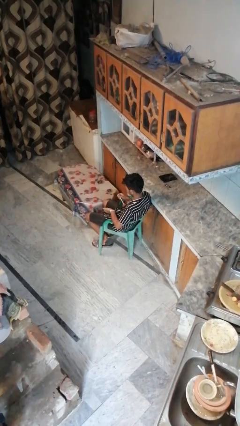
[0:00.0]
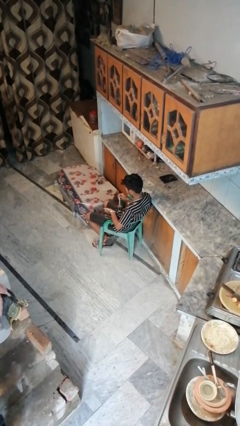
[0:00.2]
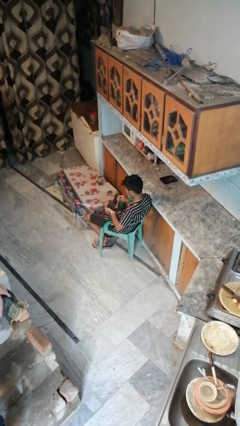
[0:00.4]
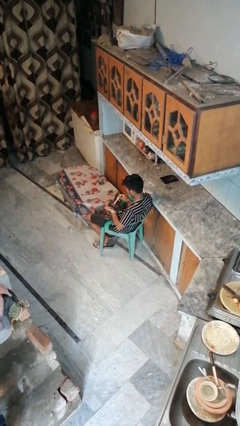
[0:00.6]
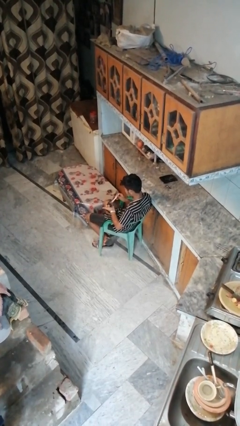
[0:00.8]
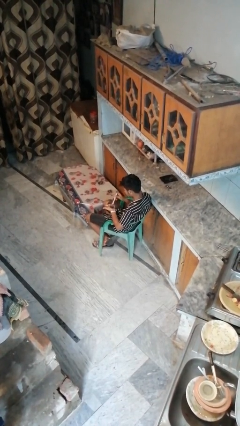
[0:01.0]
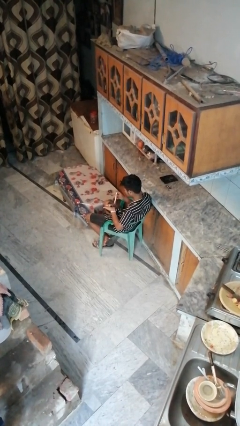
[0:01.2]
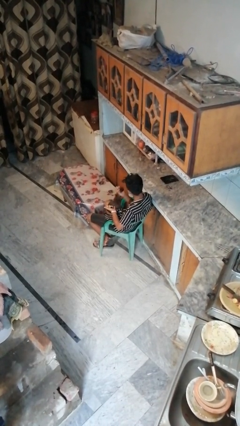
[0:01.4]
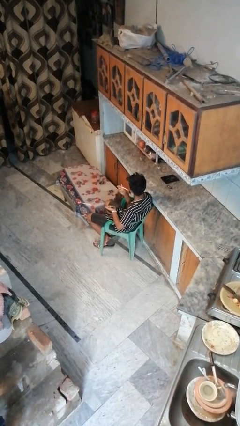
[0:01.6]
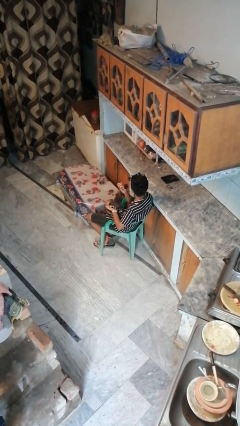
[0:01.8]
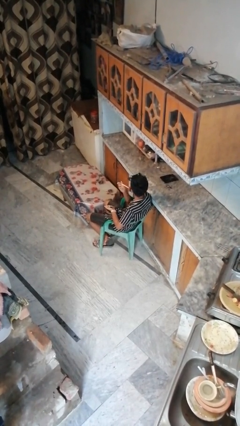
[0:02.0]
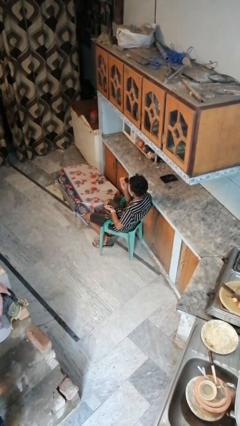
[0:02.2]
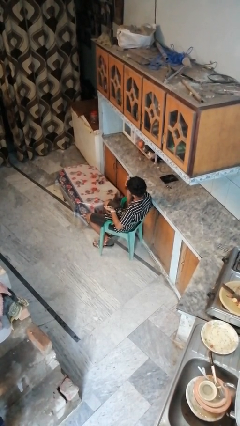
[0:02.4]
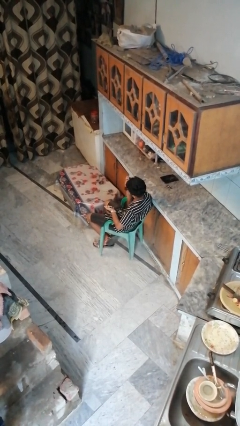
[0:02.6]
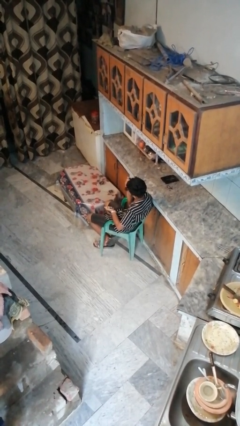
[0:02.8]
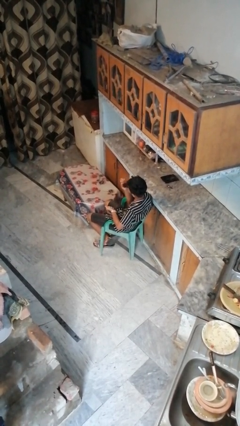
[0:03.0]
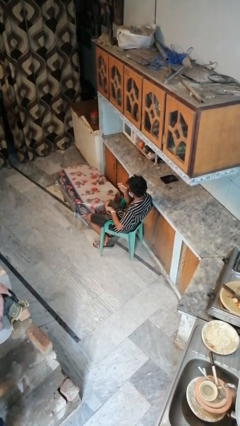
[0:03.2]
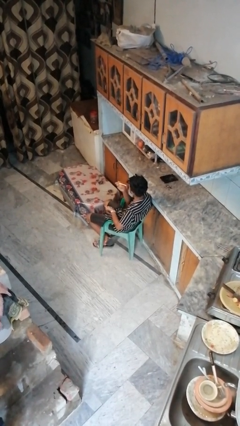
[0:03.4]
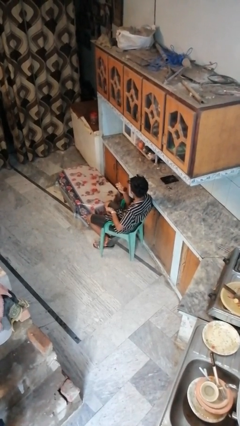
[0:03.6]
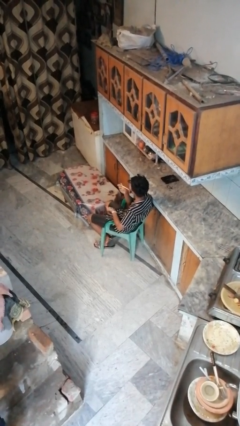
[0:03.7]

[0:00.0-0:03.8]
person applies foundation makeup

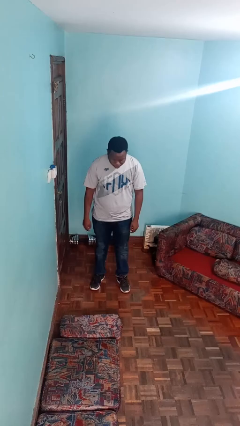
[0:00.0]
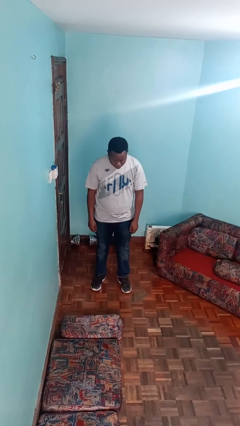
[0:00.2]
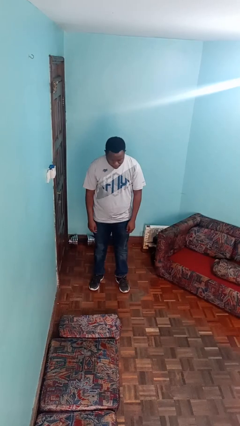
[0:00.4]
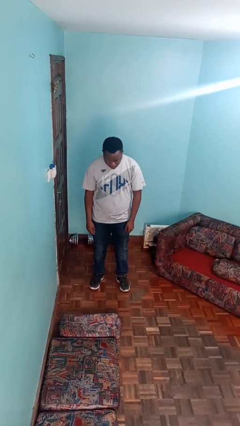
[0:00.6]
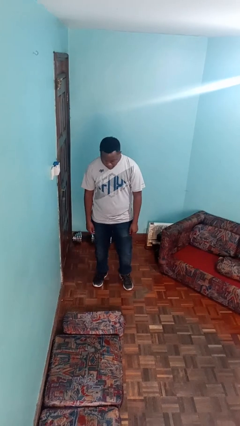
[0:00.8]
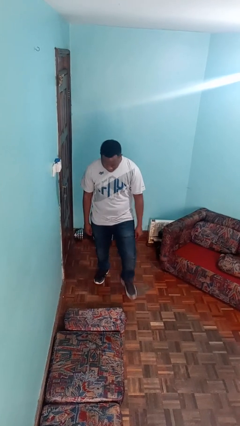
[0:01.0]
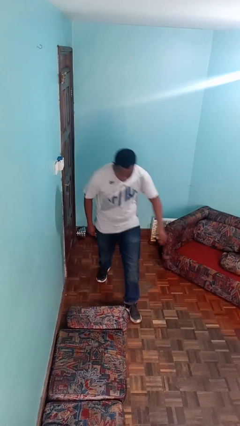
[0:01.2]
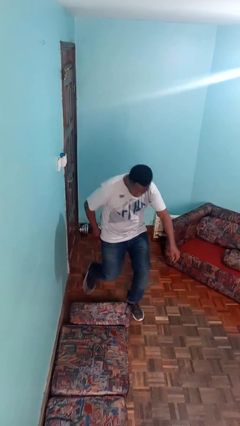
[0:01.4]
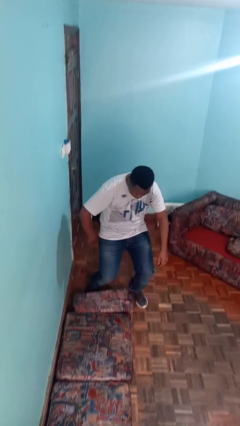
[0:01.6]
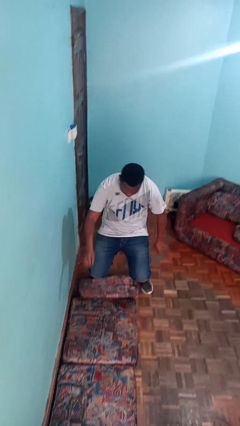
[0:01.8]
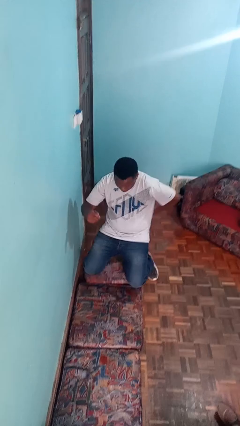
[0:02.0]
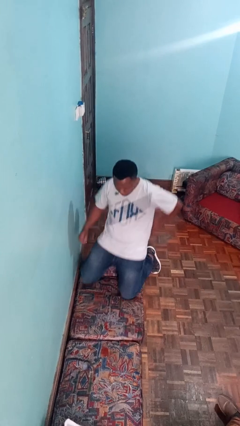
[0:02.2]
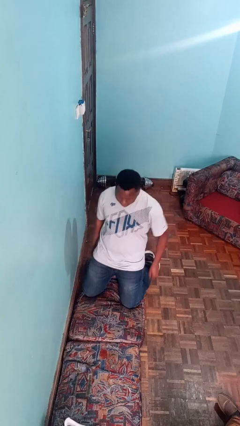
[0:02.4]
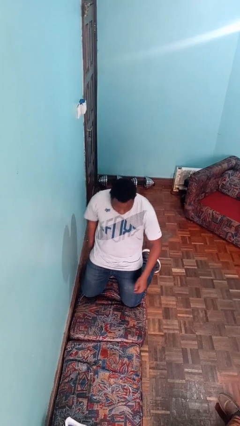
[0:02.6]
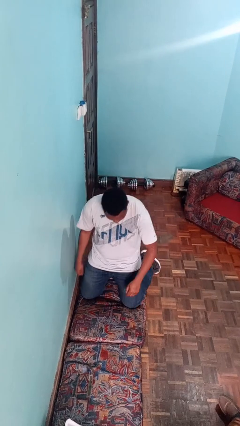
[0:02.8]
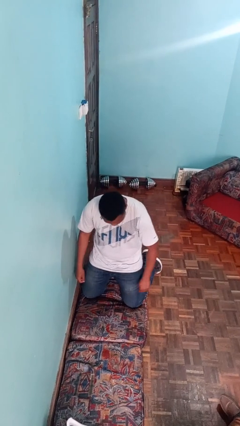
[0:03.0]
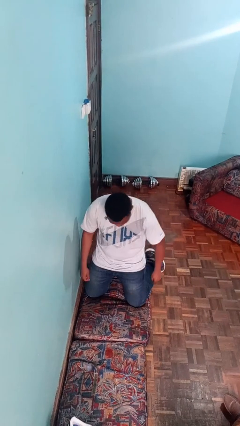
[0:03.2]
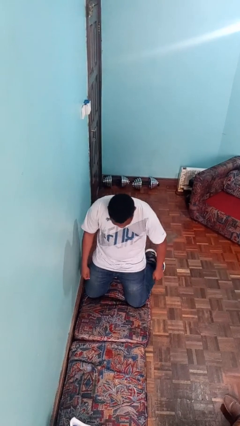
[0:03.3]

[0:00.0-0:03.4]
person trips on object on floor

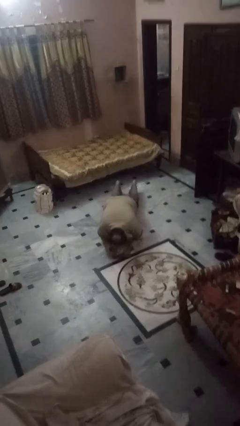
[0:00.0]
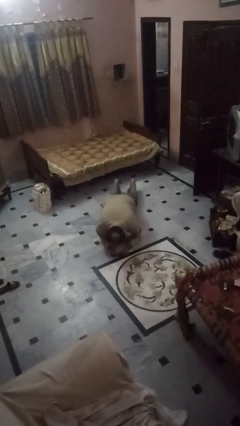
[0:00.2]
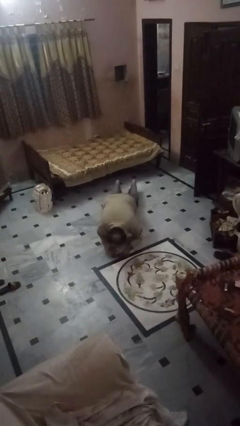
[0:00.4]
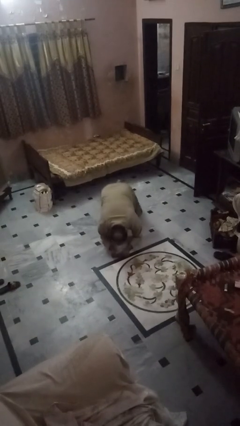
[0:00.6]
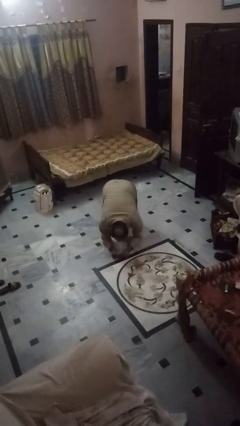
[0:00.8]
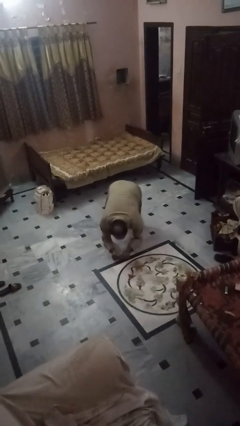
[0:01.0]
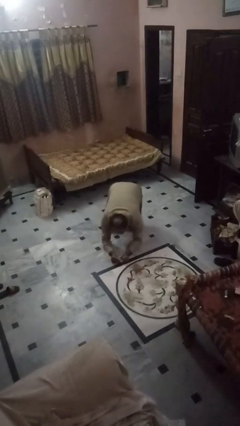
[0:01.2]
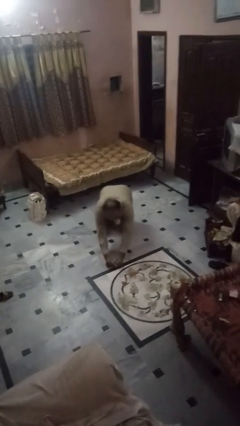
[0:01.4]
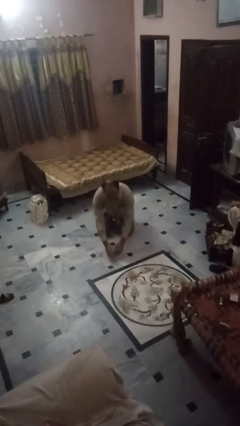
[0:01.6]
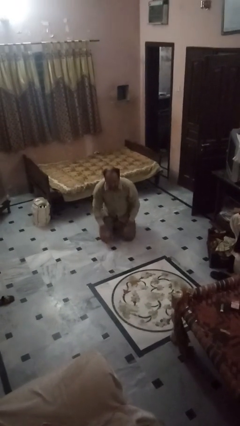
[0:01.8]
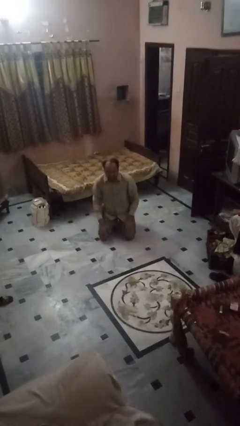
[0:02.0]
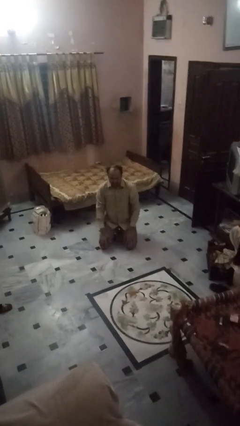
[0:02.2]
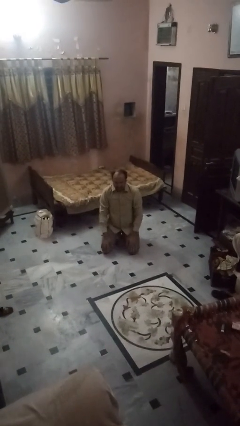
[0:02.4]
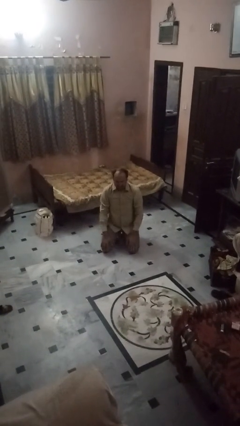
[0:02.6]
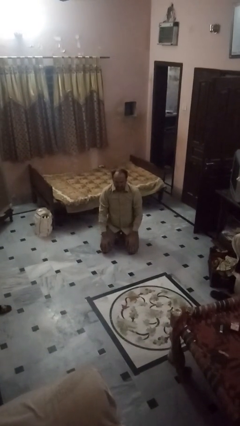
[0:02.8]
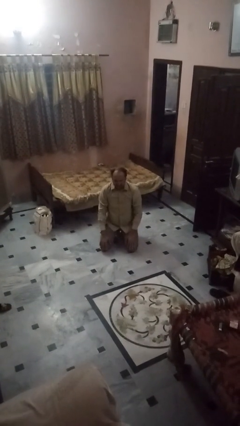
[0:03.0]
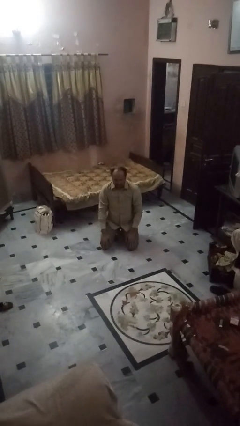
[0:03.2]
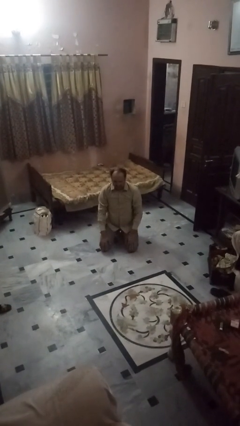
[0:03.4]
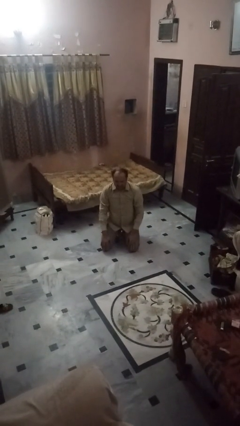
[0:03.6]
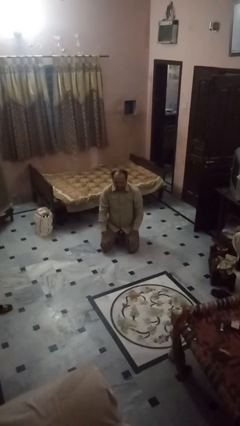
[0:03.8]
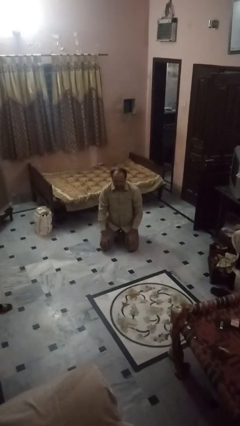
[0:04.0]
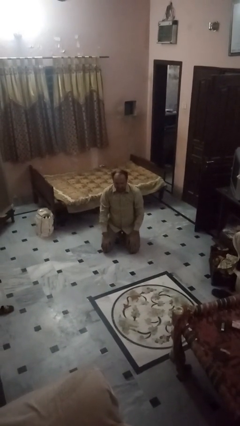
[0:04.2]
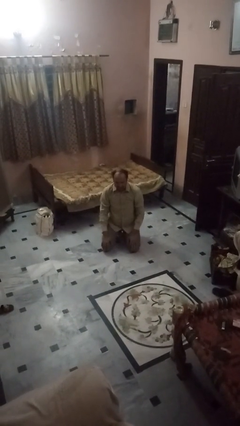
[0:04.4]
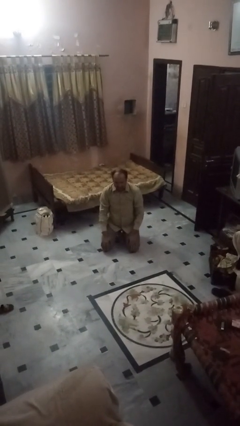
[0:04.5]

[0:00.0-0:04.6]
person stands up from floor

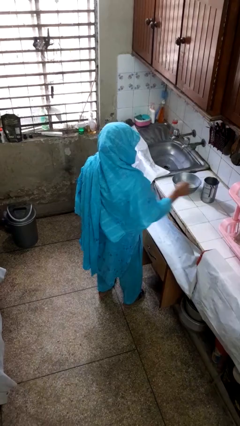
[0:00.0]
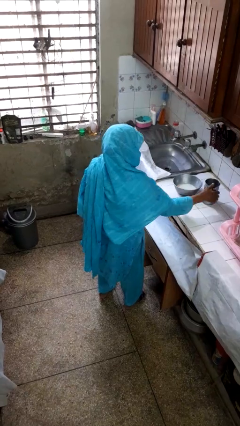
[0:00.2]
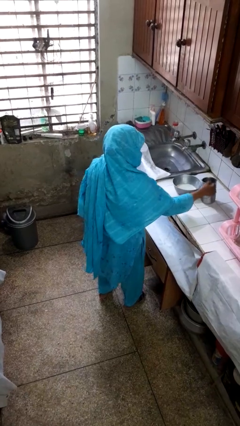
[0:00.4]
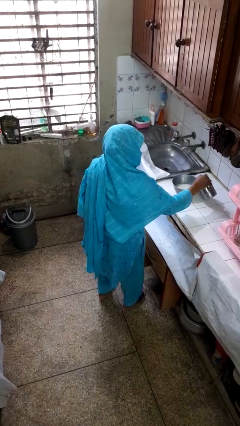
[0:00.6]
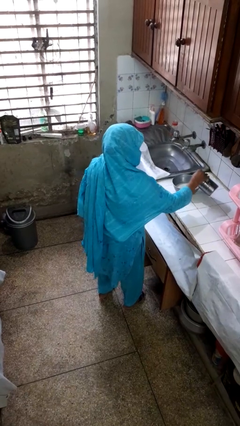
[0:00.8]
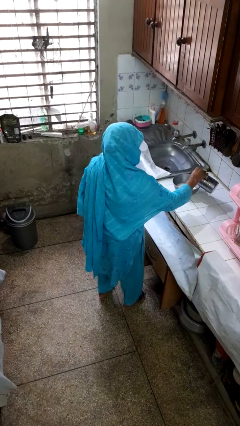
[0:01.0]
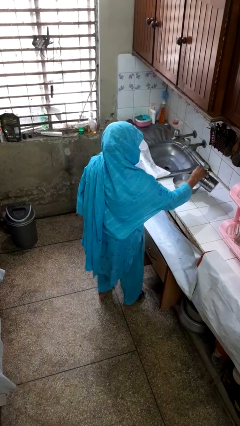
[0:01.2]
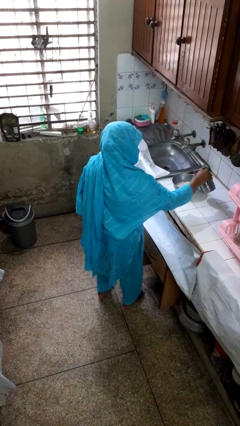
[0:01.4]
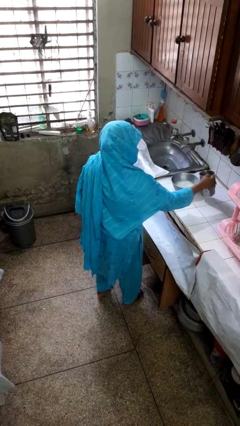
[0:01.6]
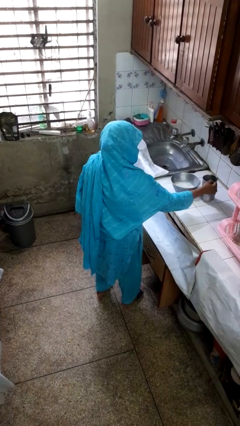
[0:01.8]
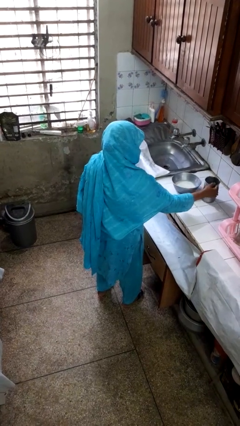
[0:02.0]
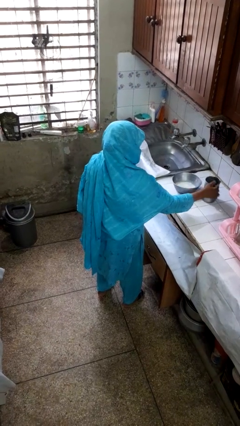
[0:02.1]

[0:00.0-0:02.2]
person pours into bowl

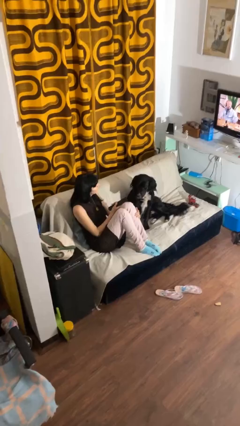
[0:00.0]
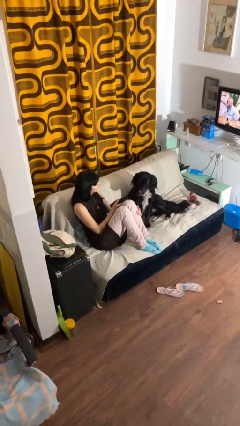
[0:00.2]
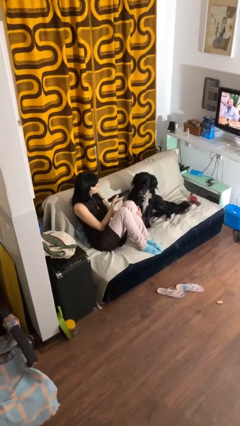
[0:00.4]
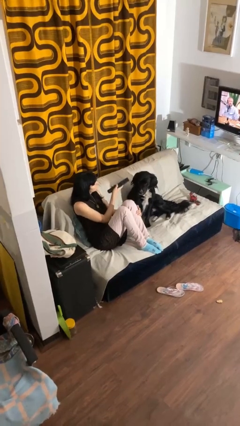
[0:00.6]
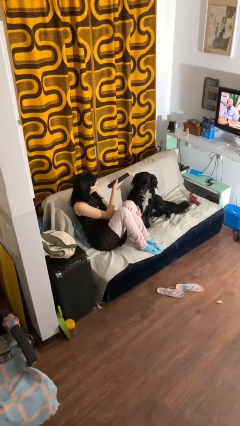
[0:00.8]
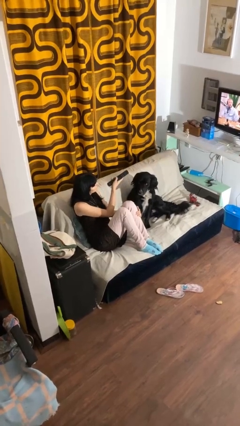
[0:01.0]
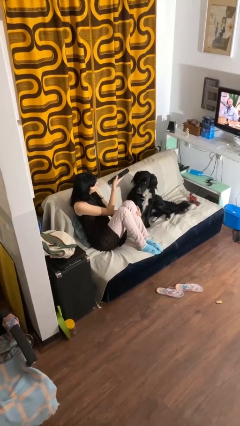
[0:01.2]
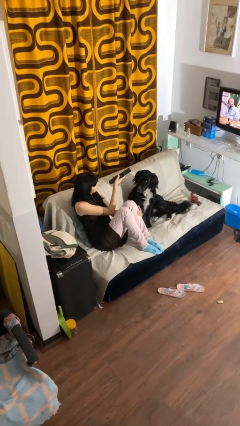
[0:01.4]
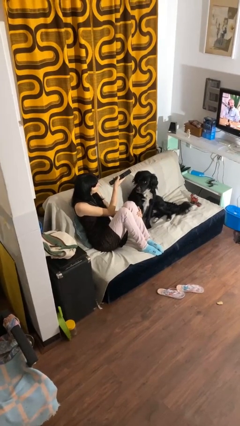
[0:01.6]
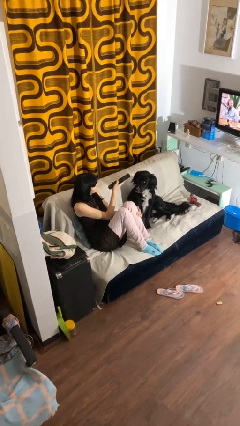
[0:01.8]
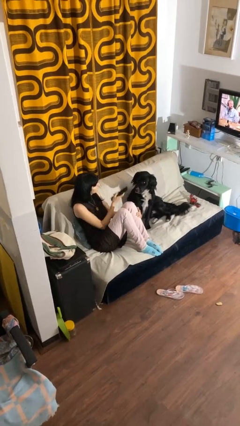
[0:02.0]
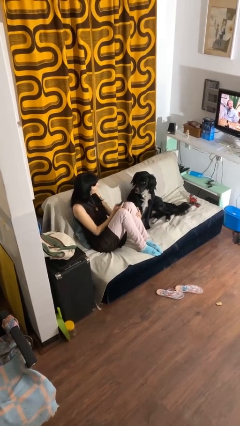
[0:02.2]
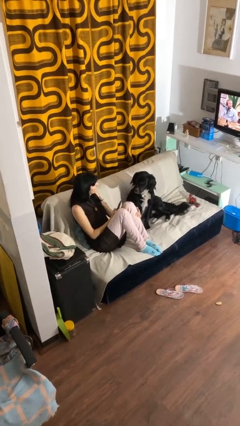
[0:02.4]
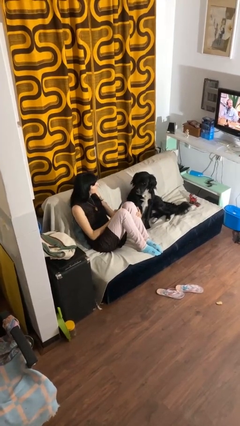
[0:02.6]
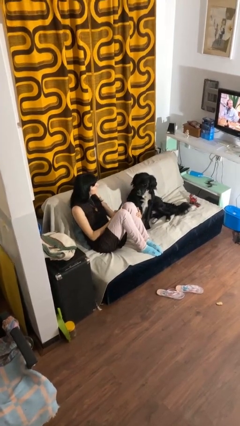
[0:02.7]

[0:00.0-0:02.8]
person uses television remote

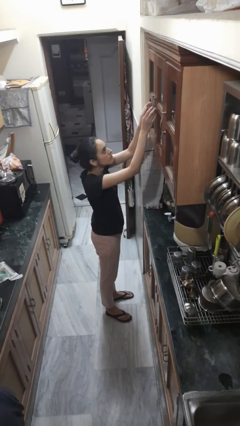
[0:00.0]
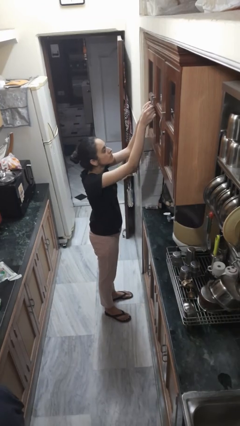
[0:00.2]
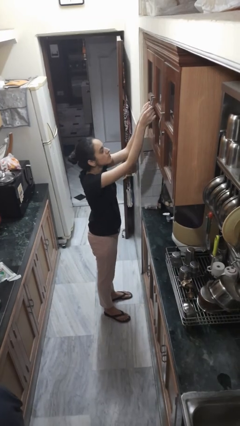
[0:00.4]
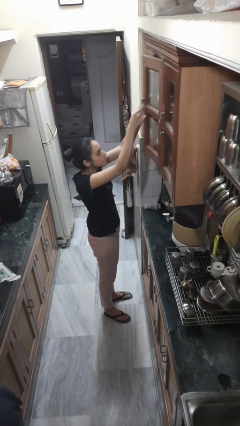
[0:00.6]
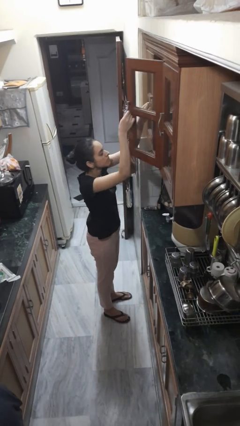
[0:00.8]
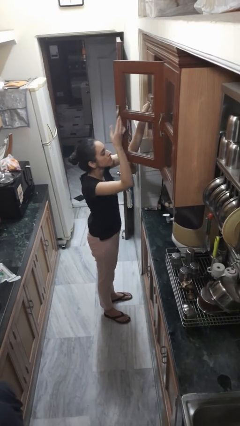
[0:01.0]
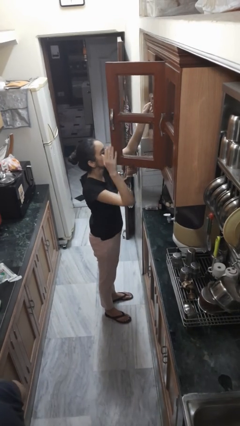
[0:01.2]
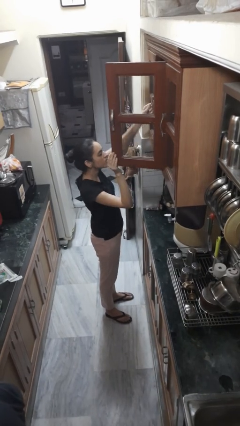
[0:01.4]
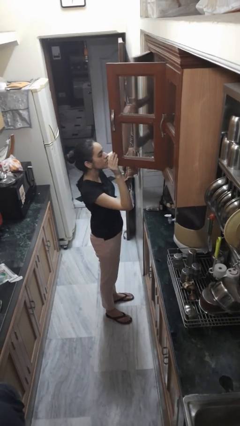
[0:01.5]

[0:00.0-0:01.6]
person opens cabinet
